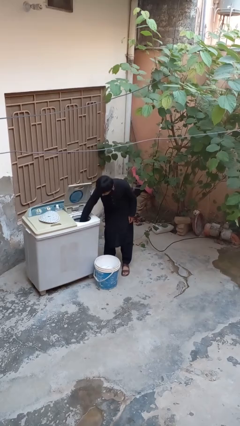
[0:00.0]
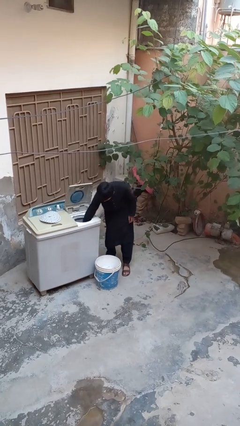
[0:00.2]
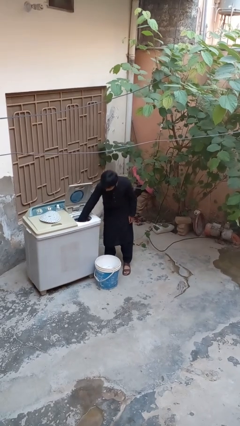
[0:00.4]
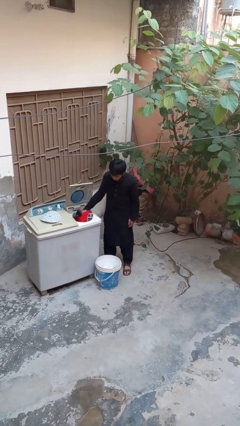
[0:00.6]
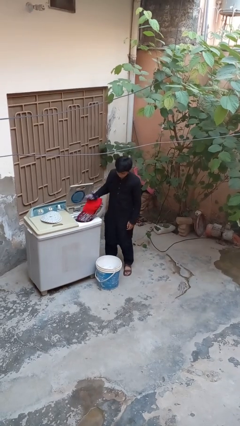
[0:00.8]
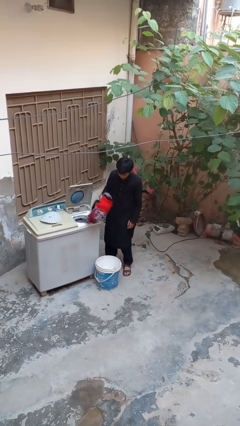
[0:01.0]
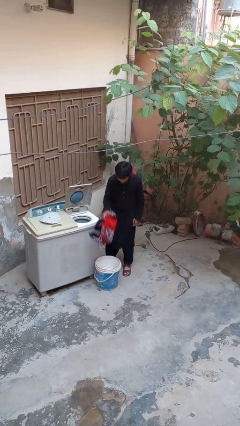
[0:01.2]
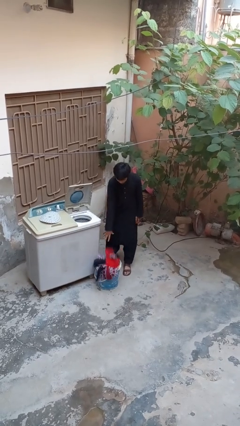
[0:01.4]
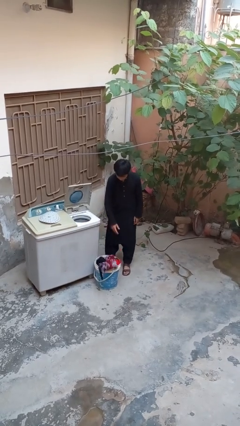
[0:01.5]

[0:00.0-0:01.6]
person unloads dryer

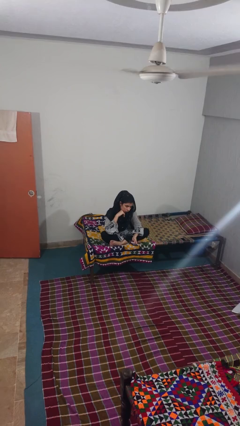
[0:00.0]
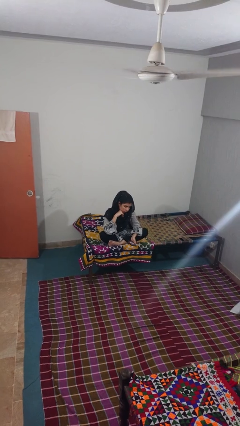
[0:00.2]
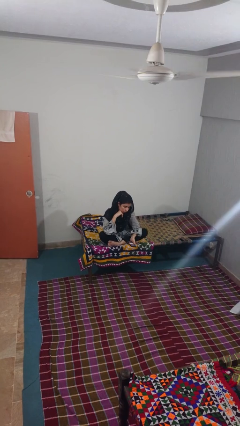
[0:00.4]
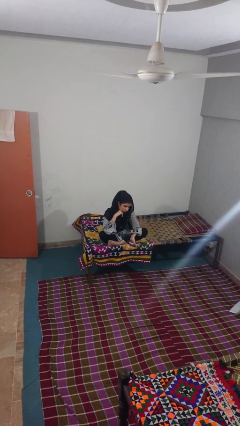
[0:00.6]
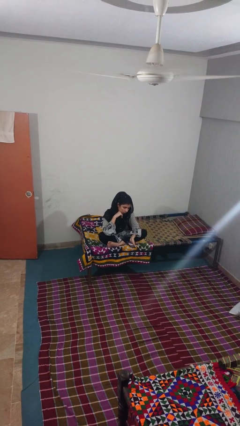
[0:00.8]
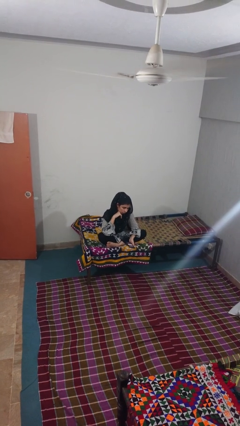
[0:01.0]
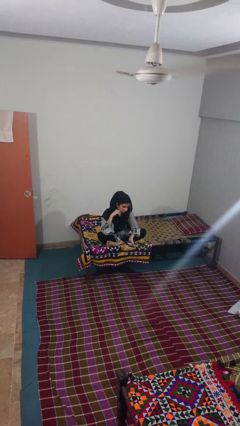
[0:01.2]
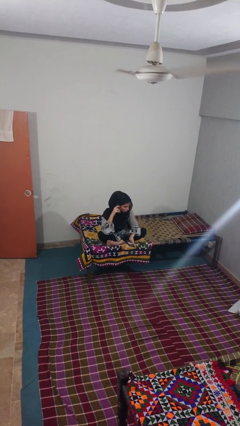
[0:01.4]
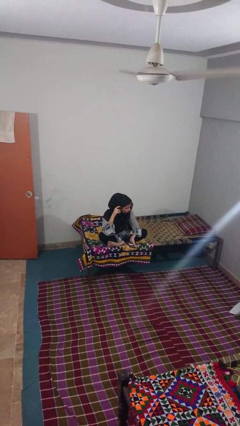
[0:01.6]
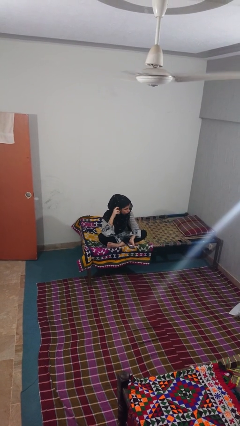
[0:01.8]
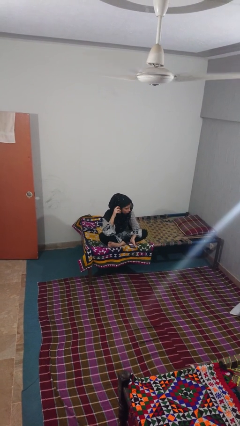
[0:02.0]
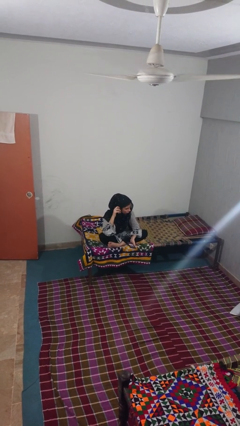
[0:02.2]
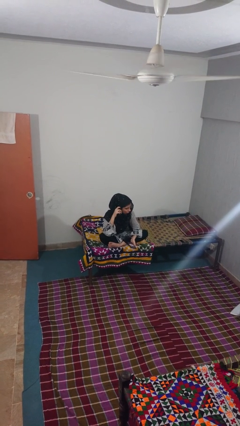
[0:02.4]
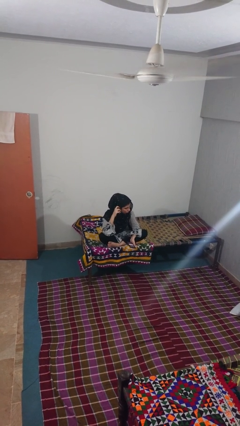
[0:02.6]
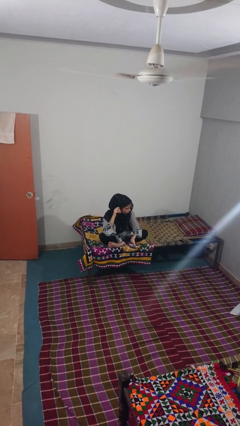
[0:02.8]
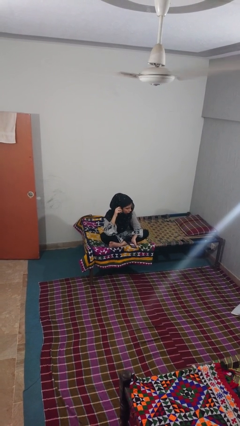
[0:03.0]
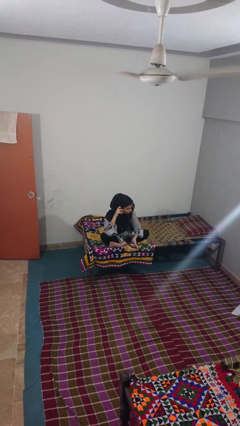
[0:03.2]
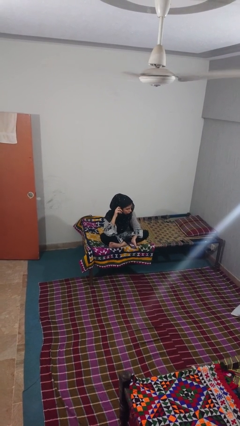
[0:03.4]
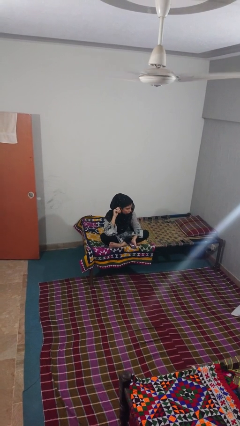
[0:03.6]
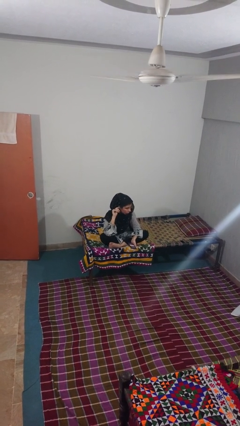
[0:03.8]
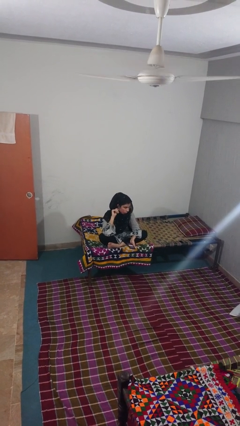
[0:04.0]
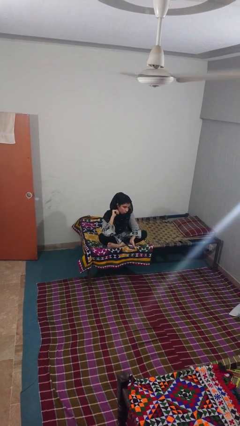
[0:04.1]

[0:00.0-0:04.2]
person touches earlobe

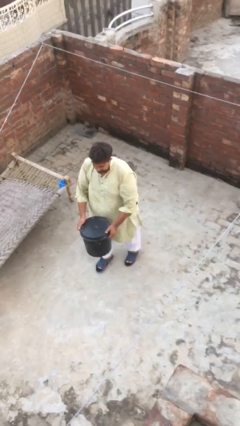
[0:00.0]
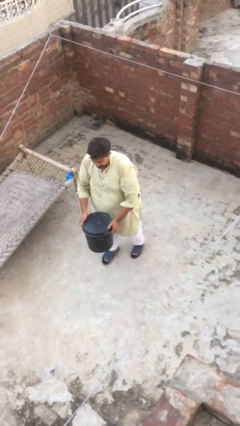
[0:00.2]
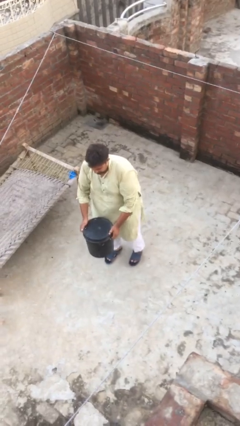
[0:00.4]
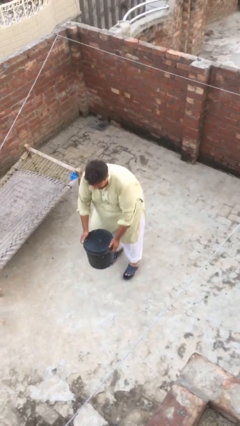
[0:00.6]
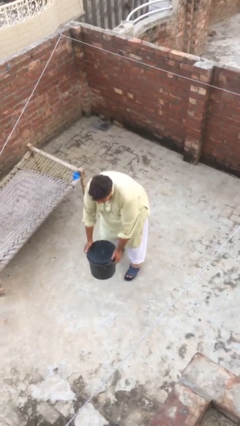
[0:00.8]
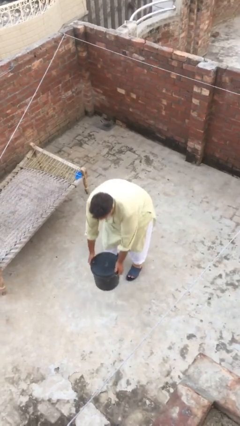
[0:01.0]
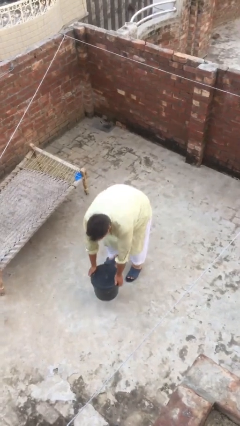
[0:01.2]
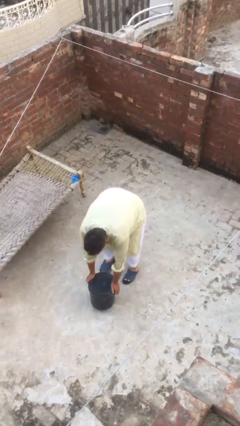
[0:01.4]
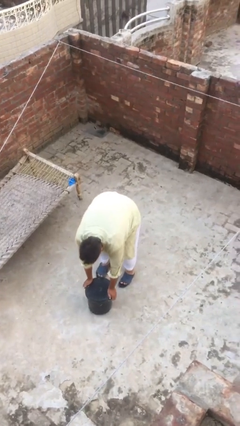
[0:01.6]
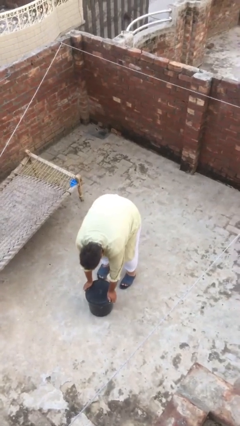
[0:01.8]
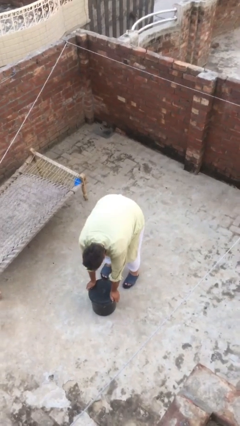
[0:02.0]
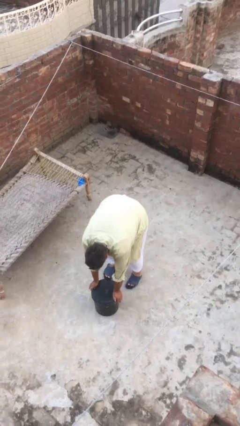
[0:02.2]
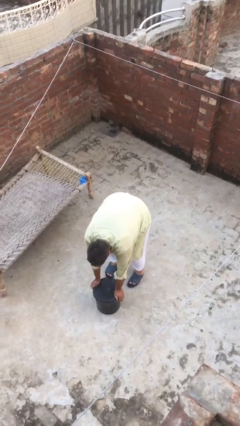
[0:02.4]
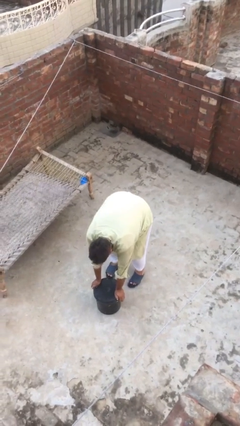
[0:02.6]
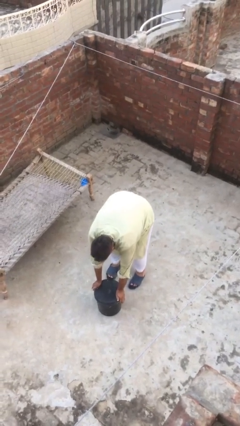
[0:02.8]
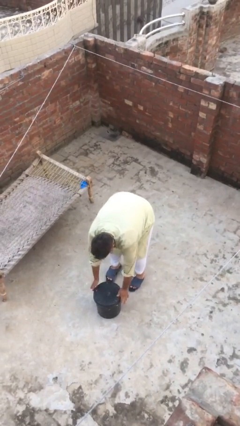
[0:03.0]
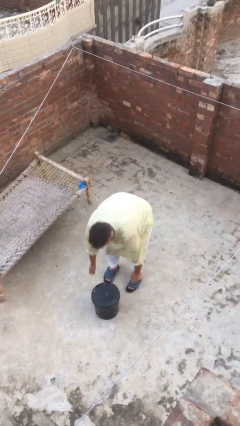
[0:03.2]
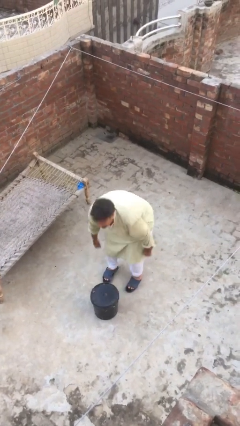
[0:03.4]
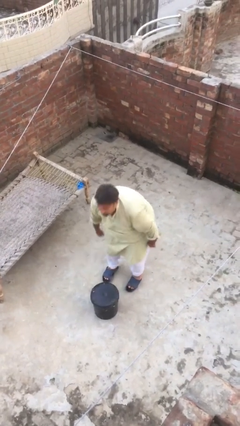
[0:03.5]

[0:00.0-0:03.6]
person puts down object on floor

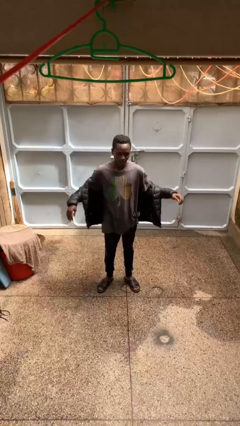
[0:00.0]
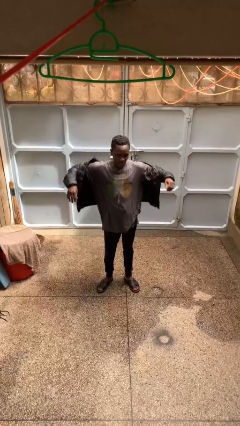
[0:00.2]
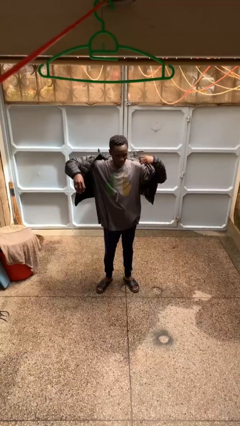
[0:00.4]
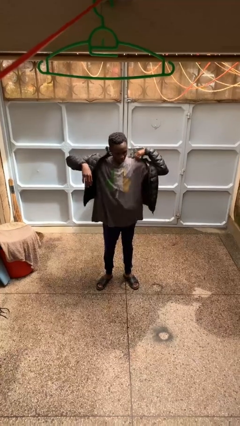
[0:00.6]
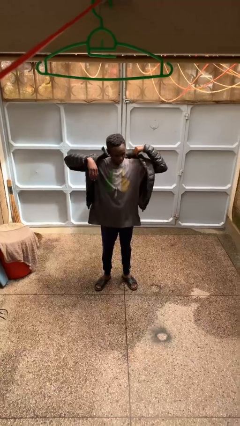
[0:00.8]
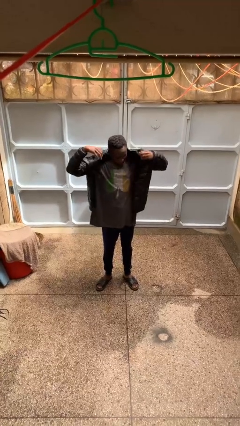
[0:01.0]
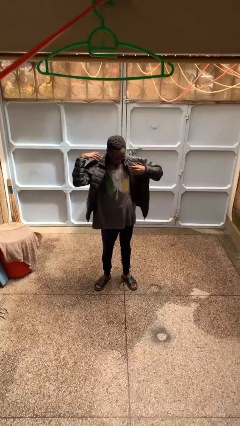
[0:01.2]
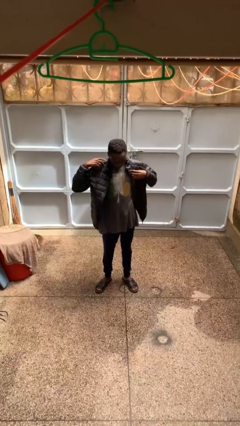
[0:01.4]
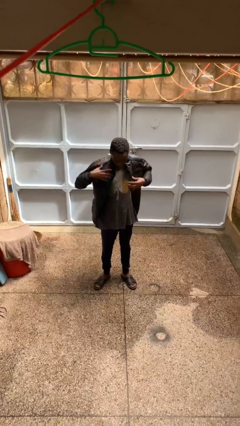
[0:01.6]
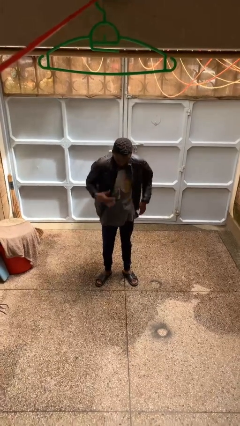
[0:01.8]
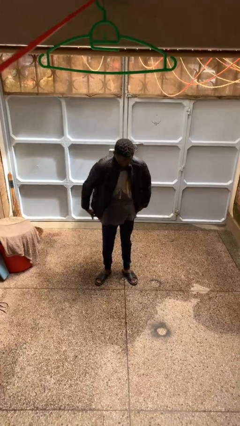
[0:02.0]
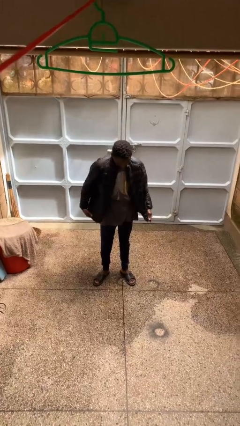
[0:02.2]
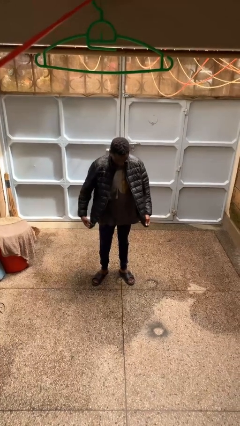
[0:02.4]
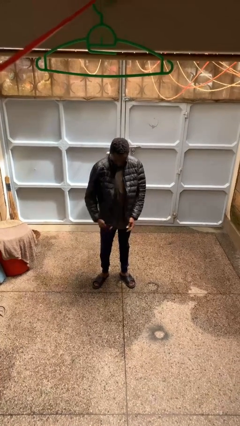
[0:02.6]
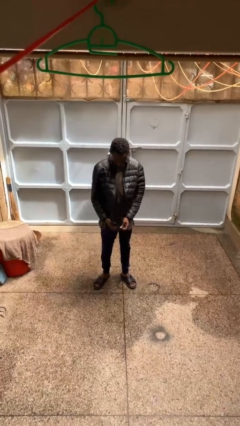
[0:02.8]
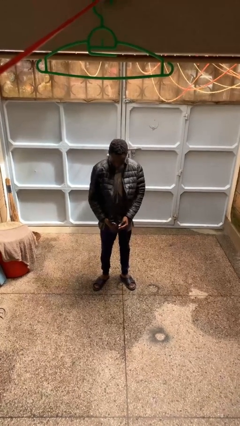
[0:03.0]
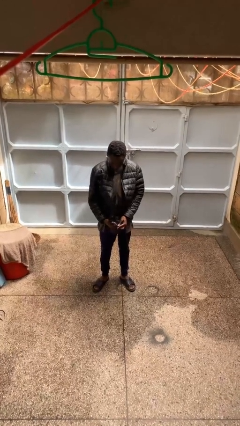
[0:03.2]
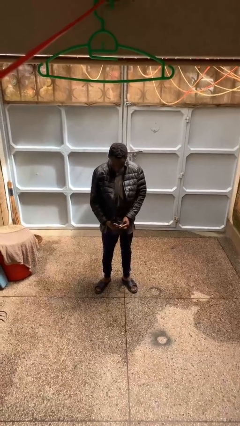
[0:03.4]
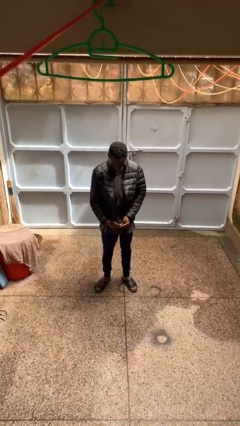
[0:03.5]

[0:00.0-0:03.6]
person puts on jacket

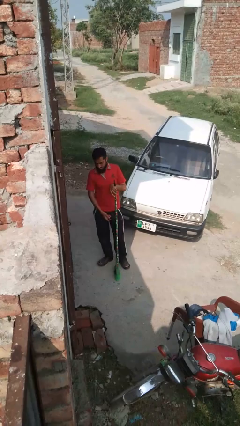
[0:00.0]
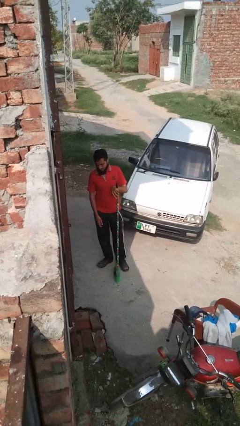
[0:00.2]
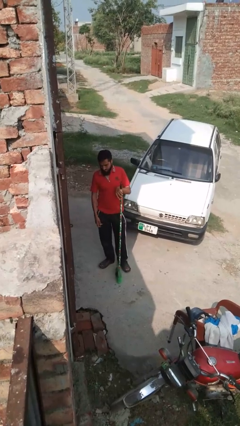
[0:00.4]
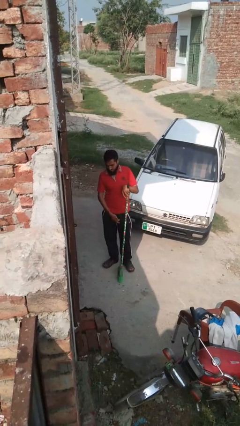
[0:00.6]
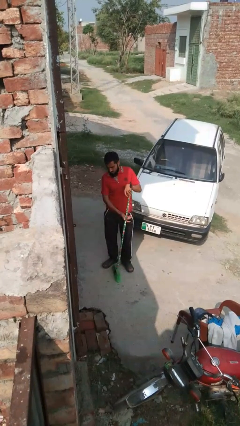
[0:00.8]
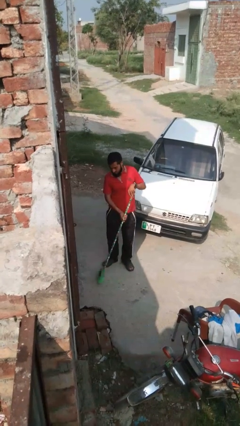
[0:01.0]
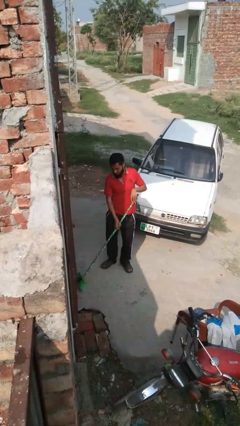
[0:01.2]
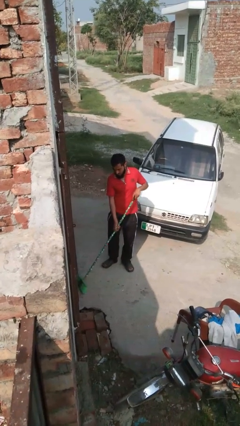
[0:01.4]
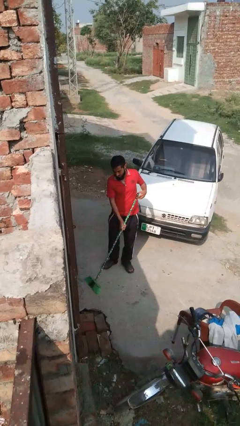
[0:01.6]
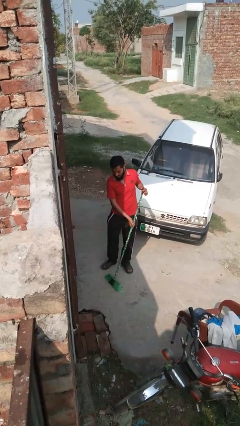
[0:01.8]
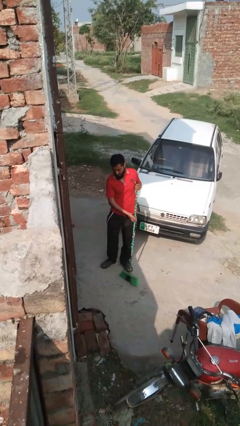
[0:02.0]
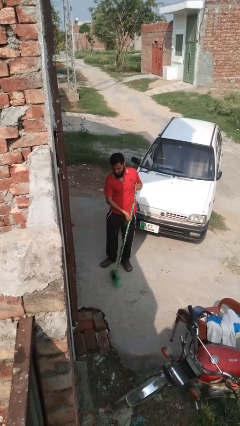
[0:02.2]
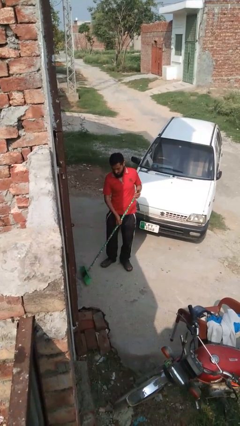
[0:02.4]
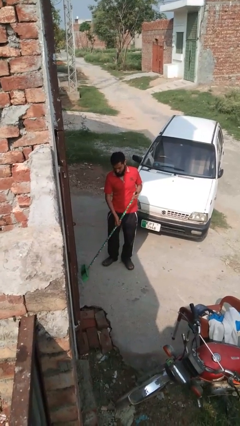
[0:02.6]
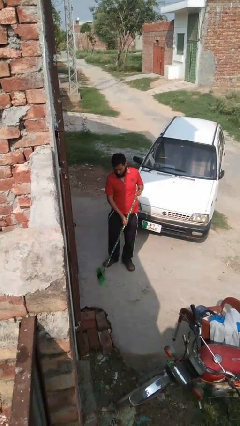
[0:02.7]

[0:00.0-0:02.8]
person sweeps floor

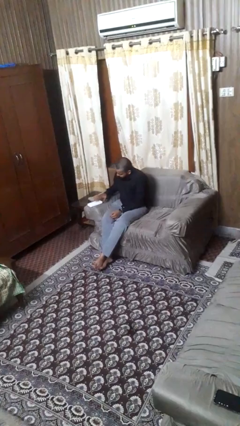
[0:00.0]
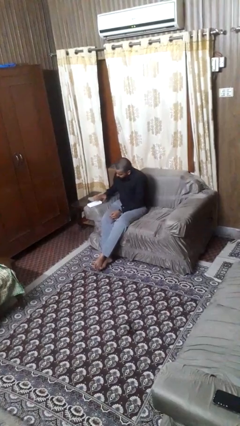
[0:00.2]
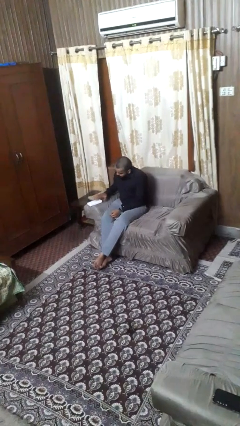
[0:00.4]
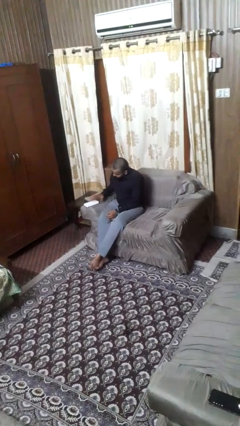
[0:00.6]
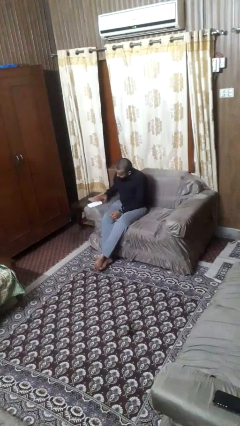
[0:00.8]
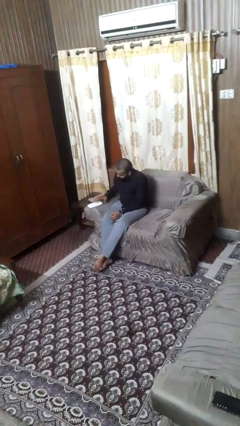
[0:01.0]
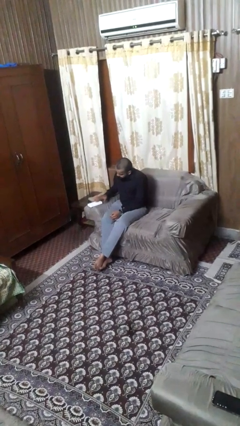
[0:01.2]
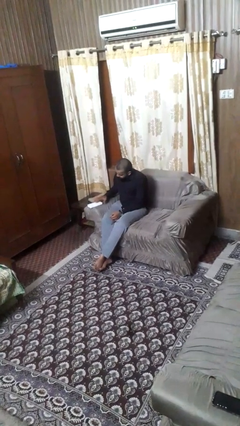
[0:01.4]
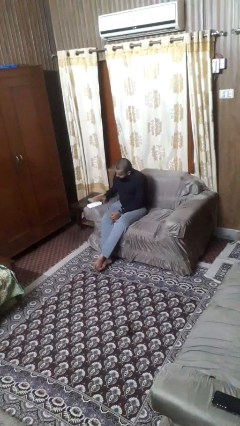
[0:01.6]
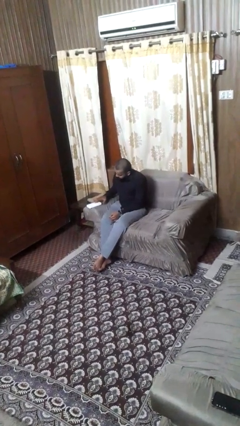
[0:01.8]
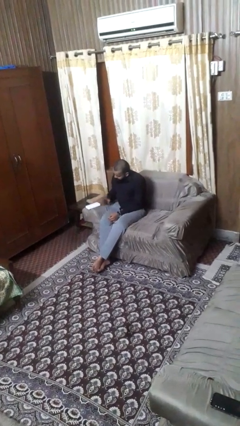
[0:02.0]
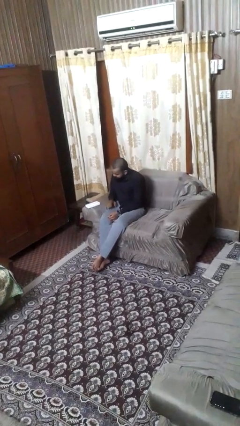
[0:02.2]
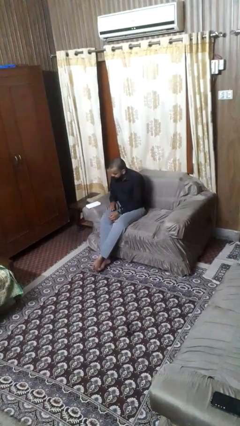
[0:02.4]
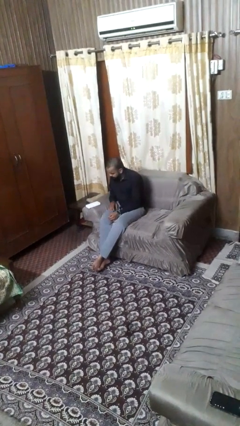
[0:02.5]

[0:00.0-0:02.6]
person taps object with finger
